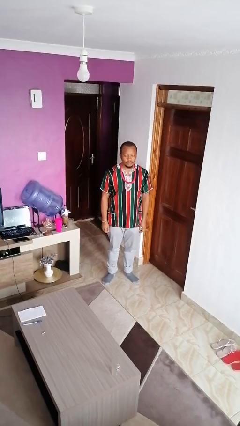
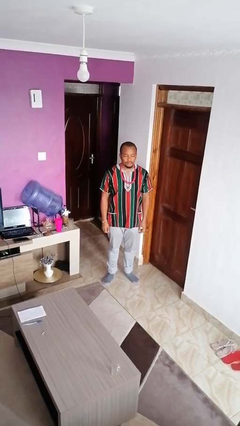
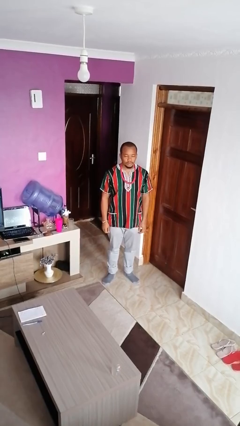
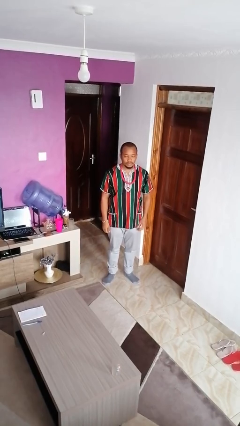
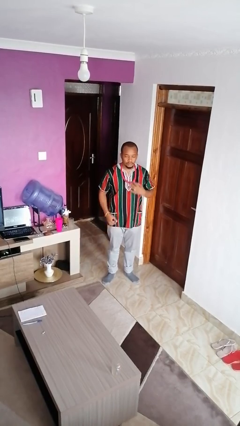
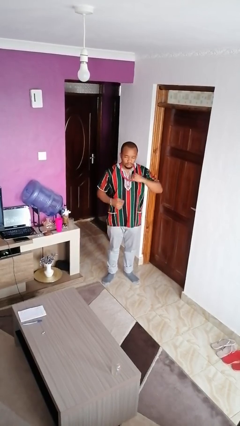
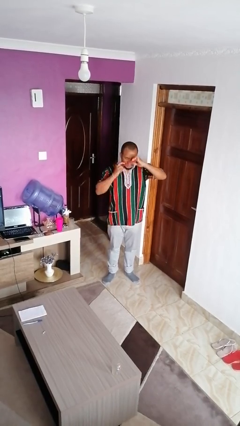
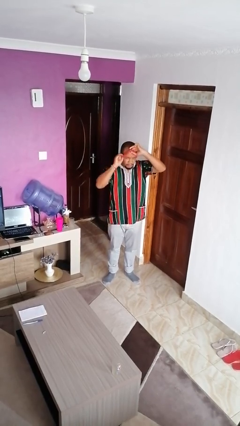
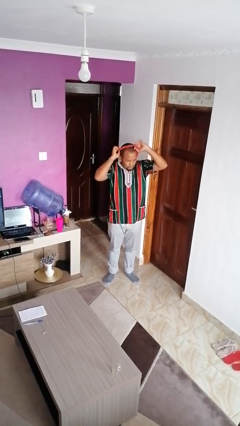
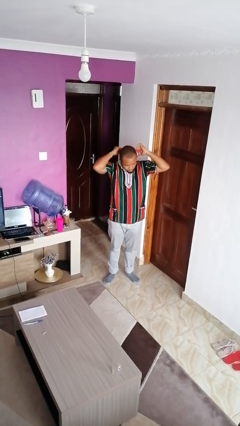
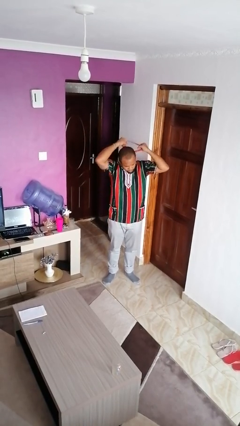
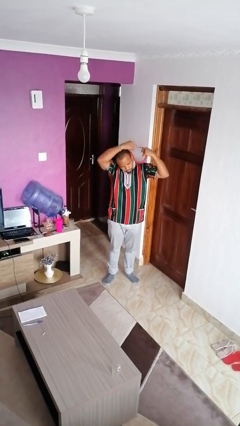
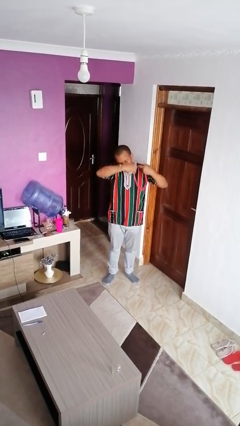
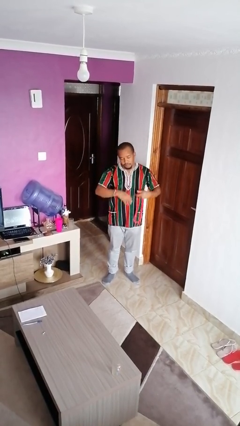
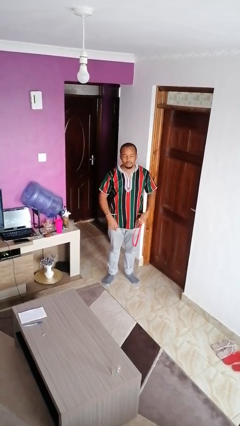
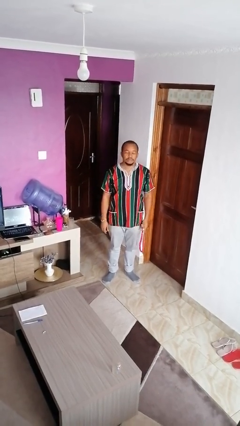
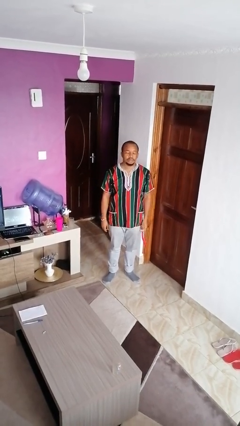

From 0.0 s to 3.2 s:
person takes off necklace

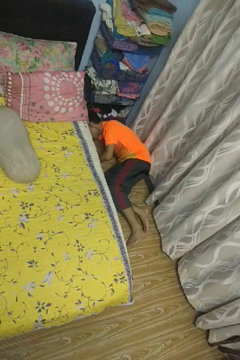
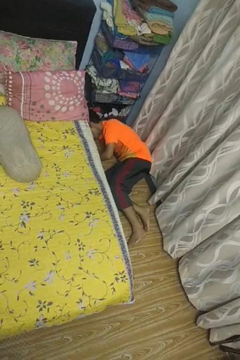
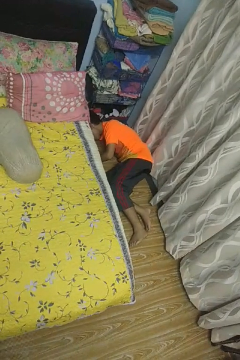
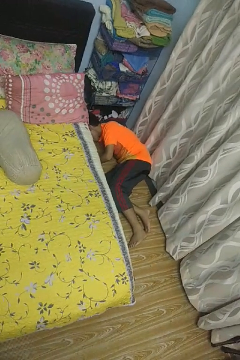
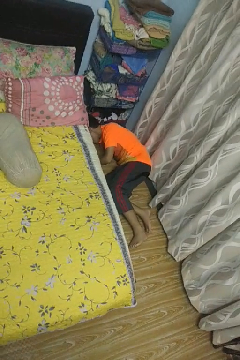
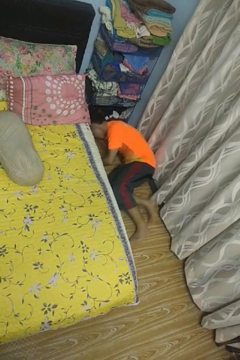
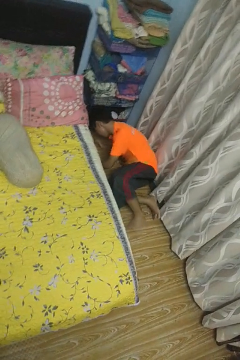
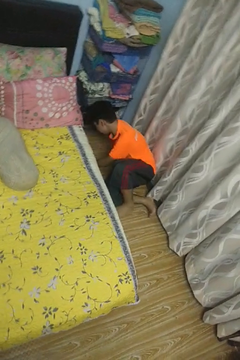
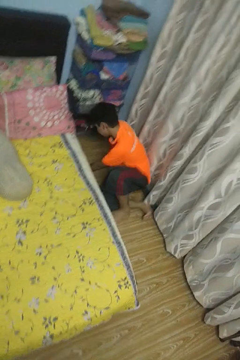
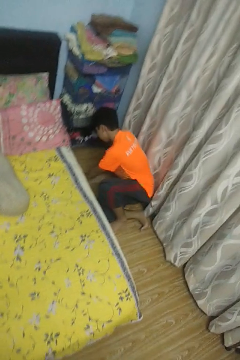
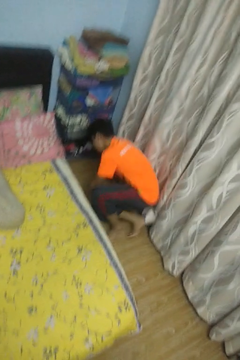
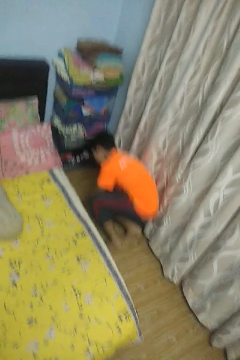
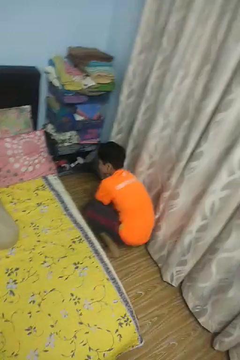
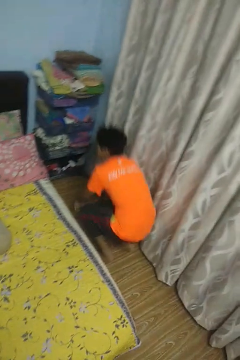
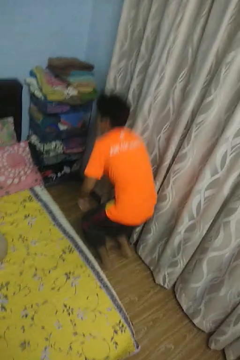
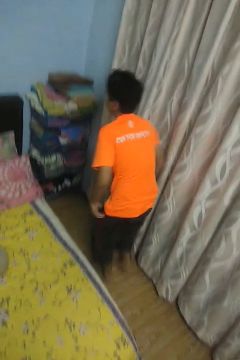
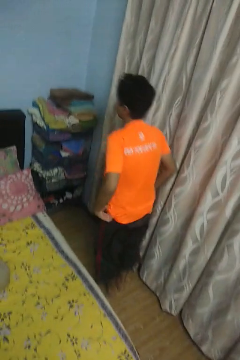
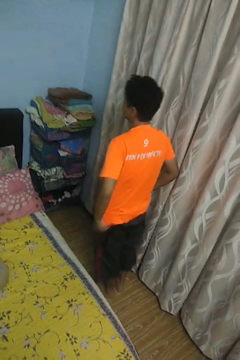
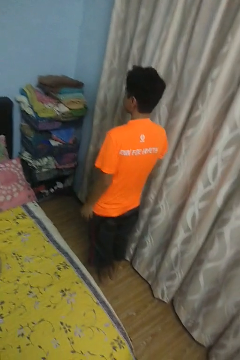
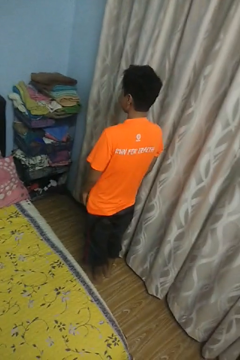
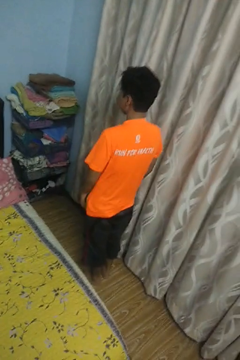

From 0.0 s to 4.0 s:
person stands up from floor

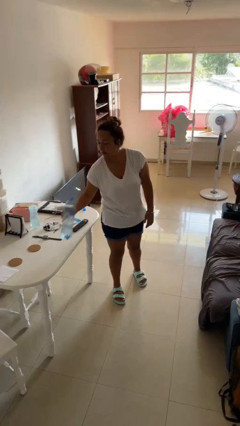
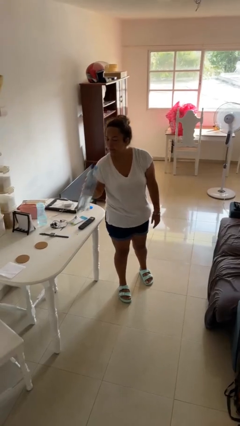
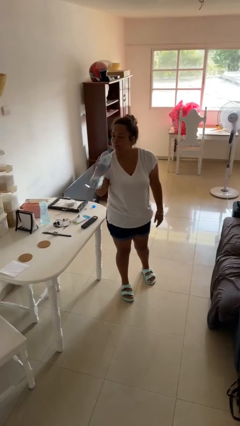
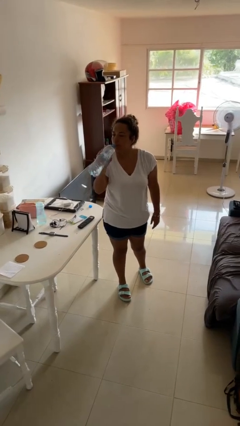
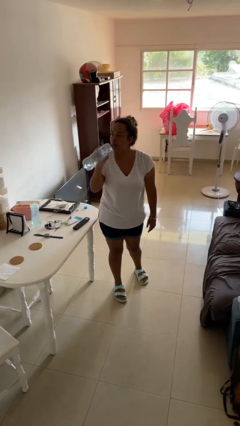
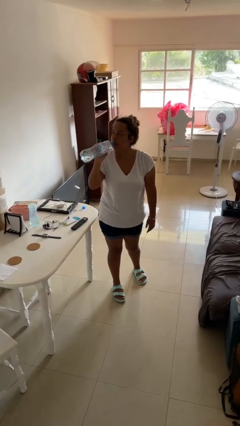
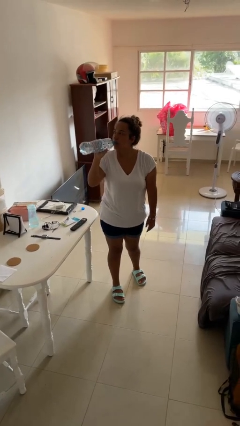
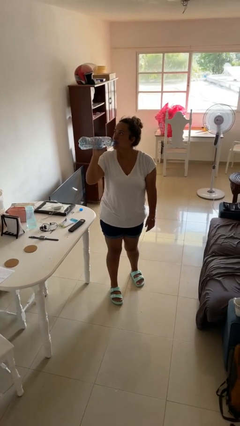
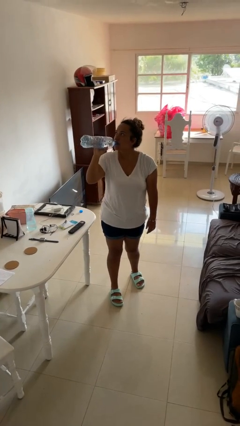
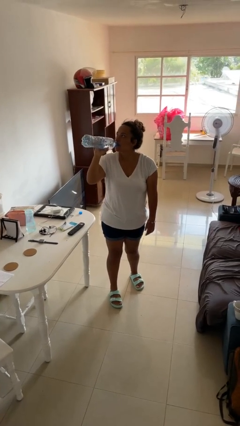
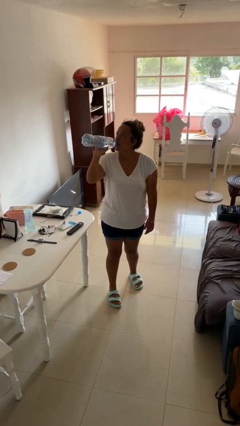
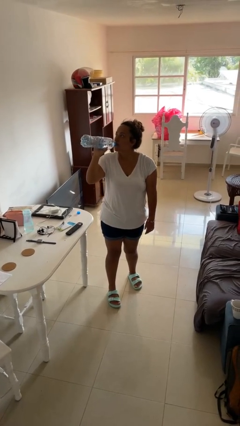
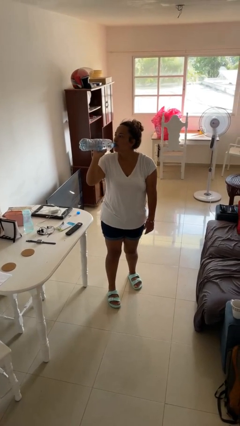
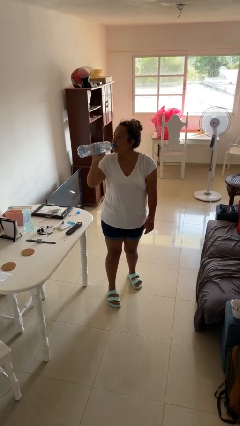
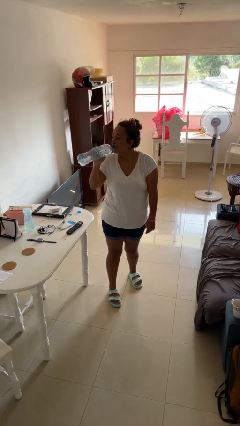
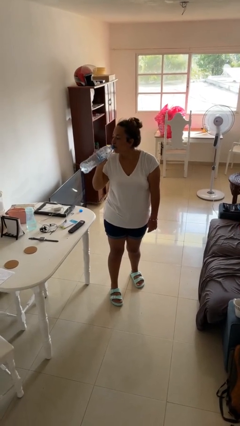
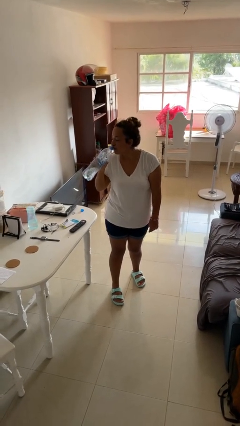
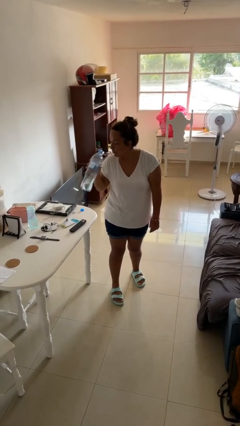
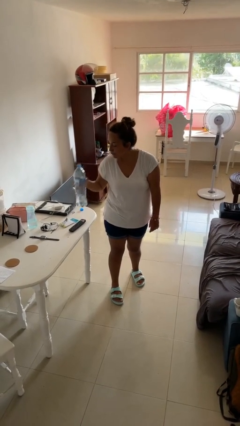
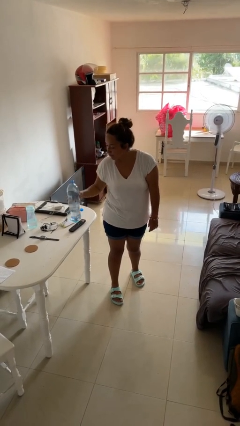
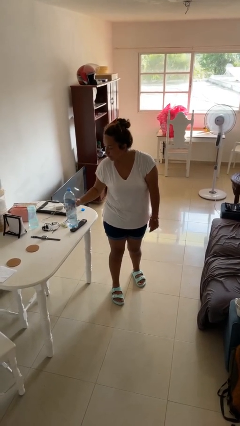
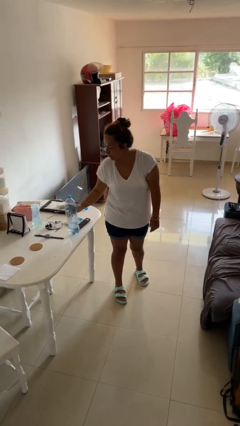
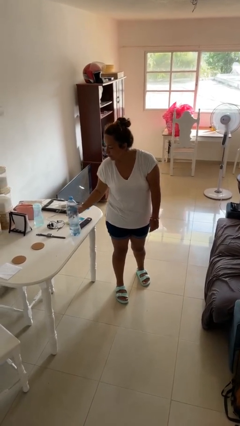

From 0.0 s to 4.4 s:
person drinks from bottle

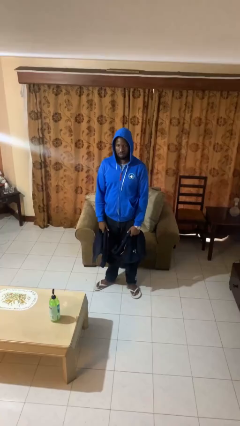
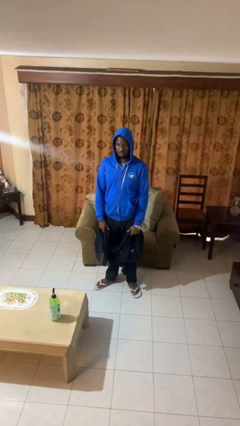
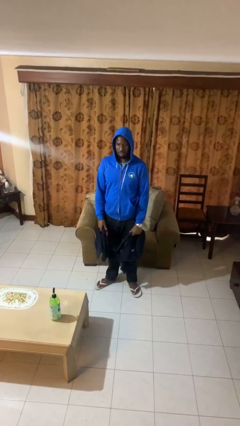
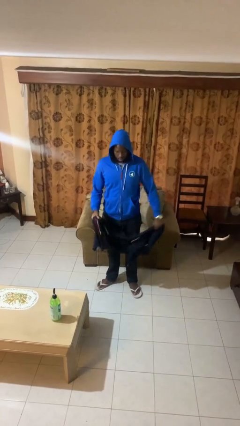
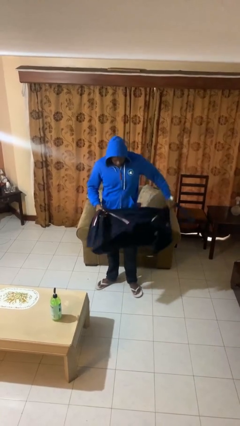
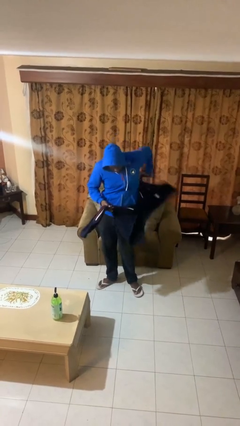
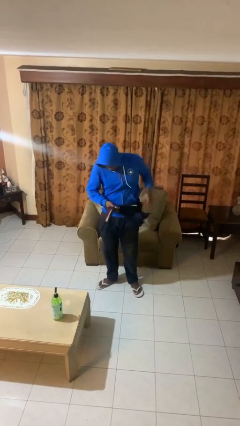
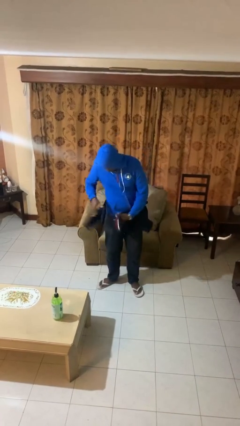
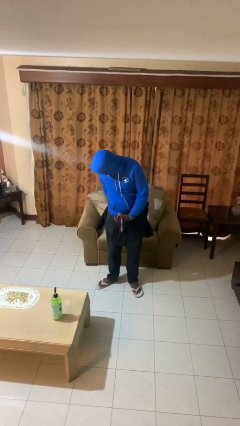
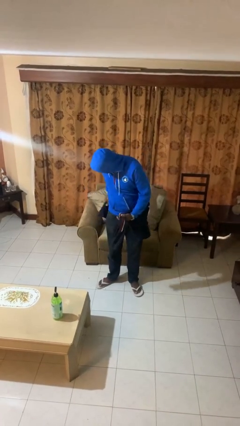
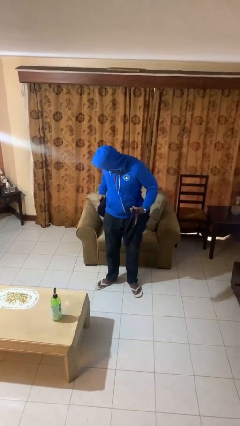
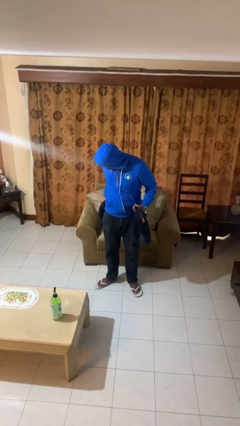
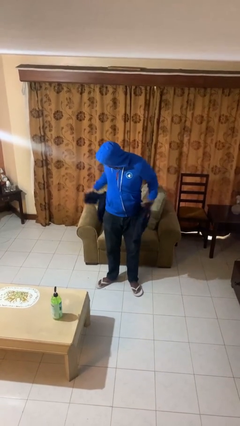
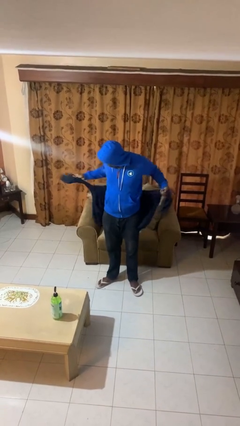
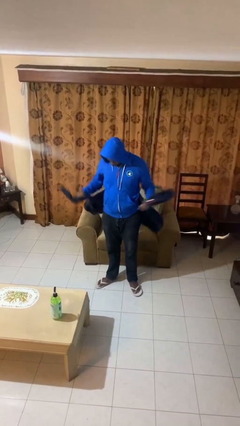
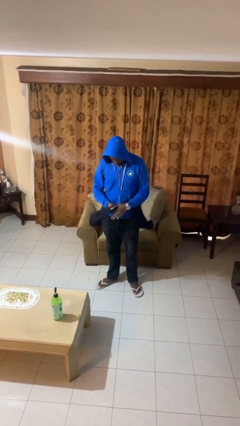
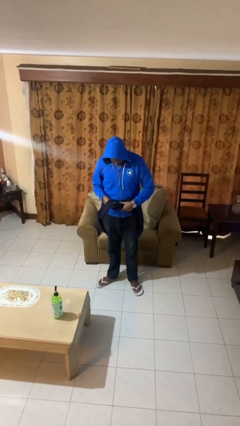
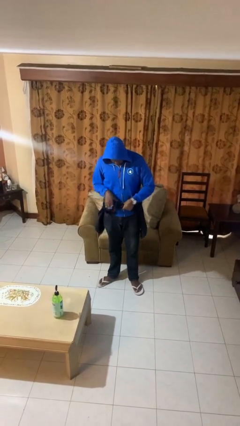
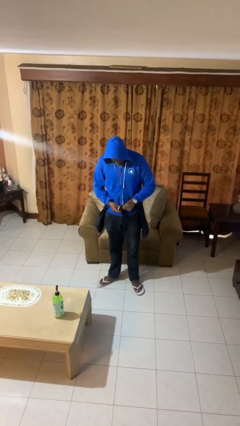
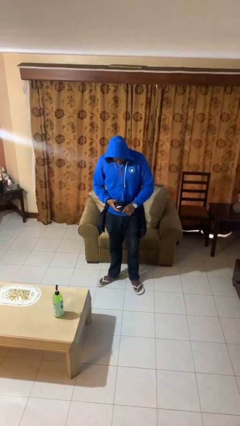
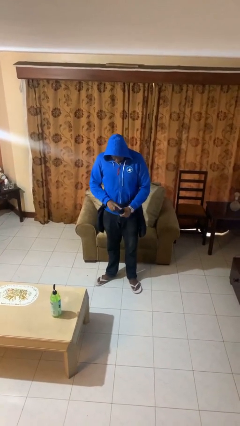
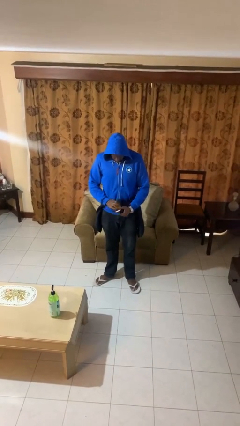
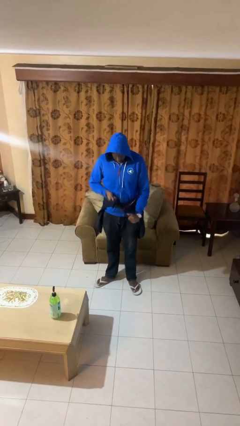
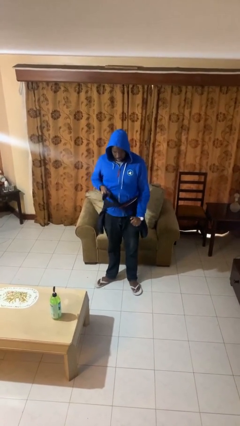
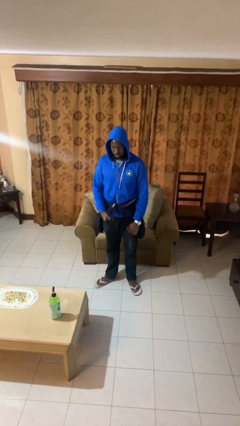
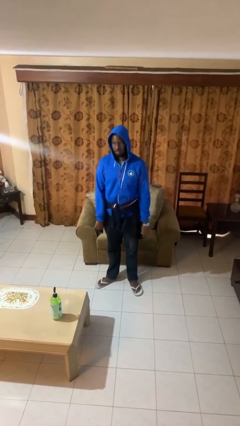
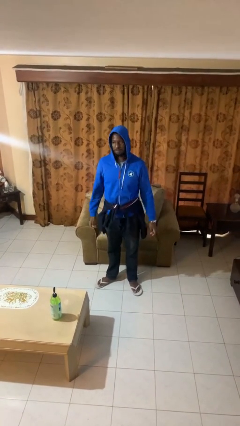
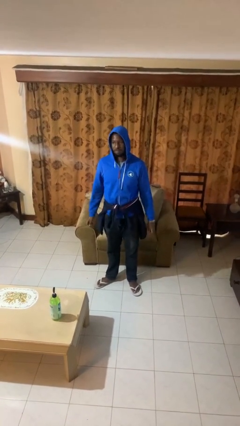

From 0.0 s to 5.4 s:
person ties jacket around waist

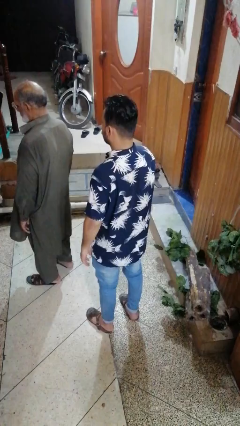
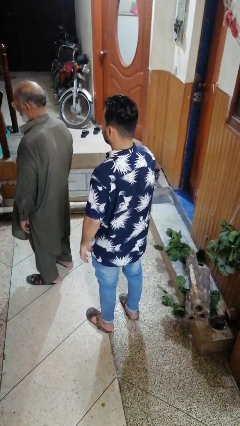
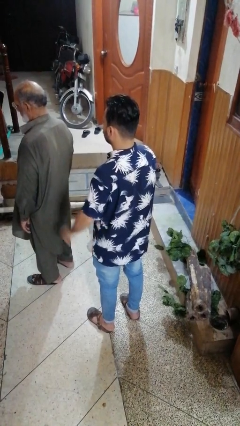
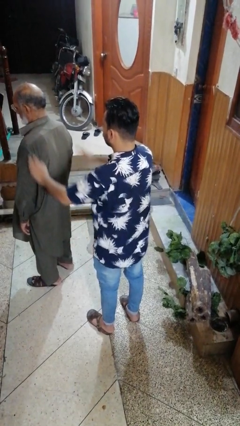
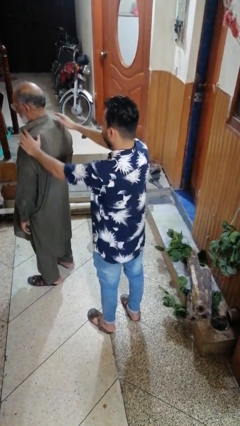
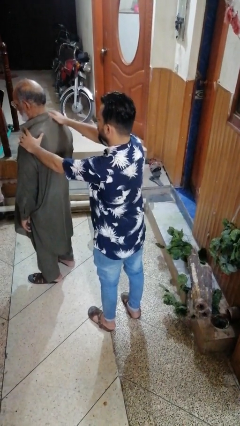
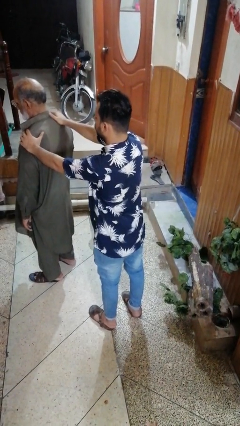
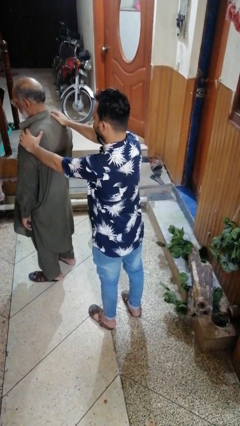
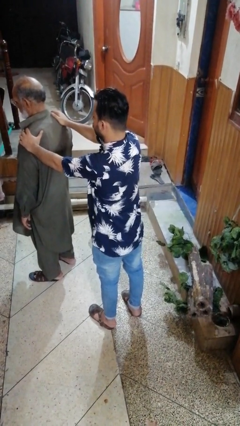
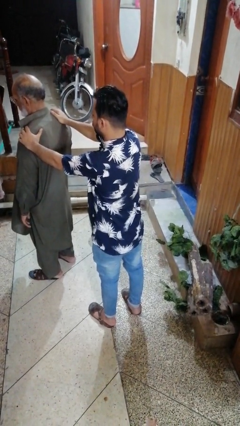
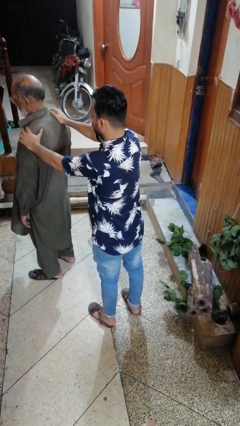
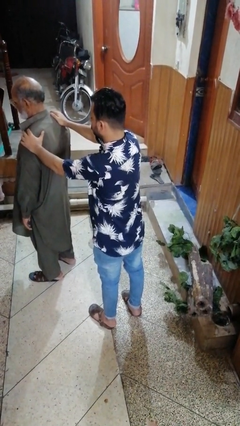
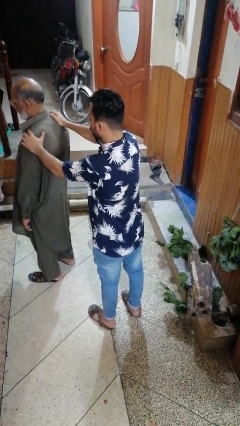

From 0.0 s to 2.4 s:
person grabs person by shoulder
